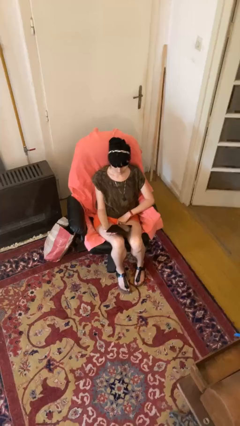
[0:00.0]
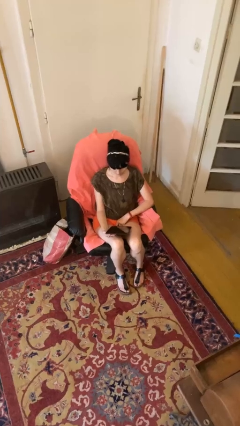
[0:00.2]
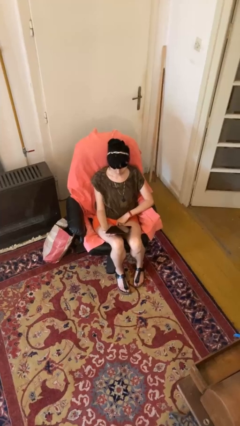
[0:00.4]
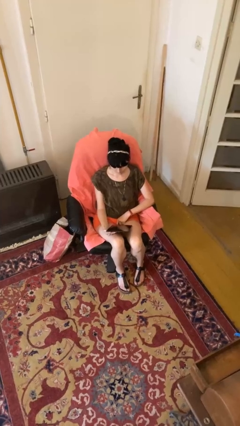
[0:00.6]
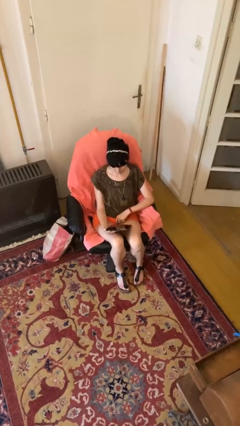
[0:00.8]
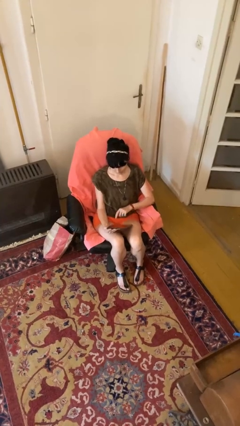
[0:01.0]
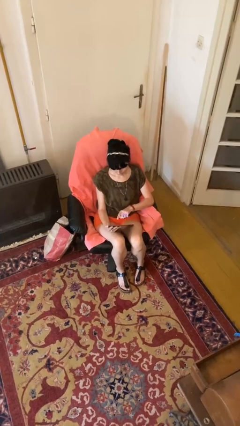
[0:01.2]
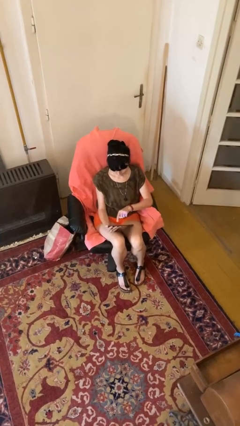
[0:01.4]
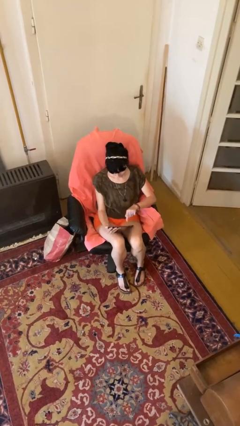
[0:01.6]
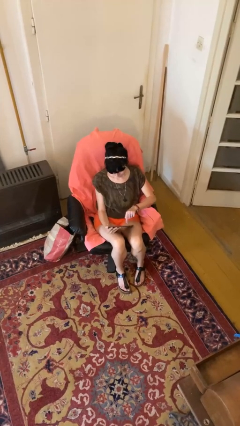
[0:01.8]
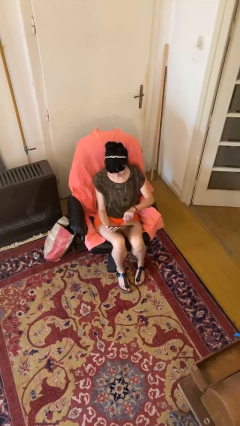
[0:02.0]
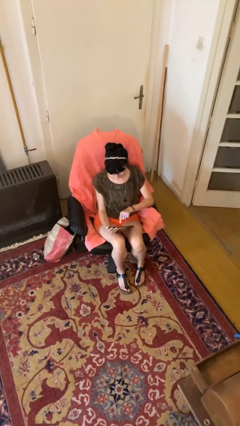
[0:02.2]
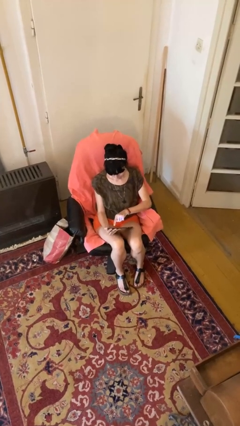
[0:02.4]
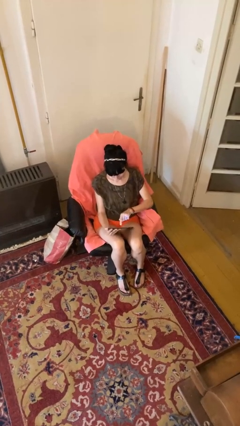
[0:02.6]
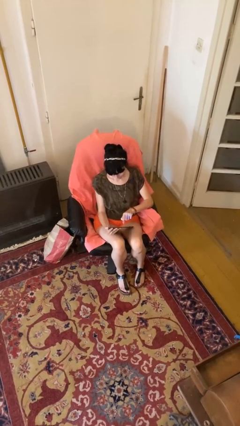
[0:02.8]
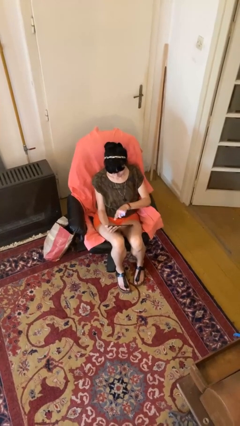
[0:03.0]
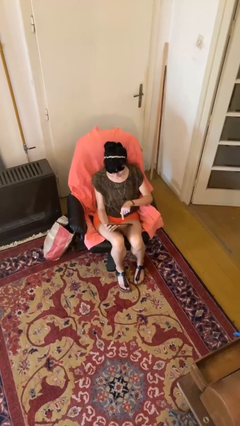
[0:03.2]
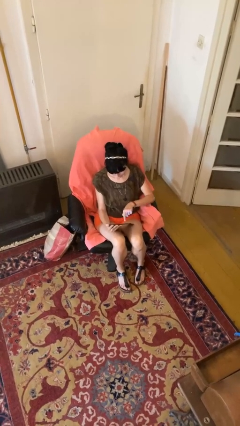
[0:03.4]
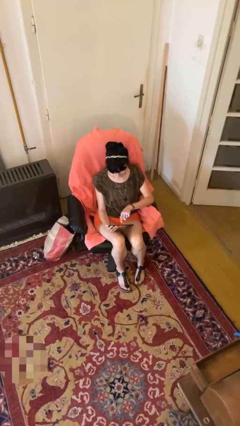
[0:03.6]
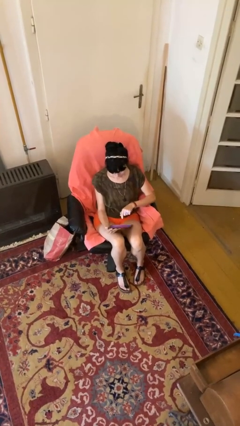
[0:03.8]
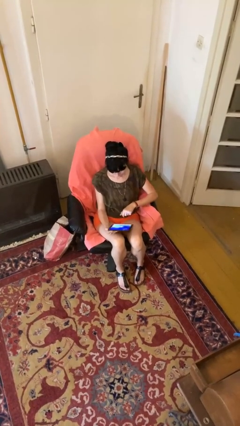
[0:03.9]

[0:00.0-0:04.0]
person interacts with tablet

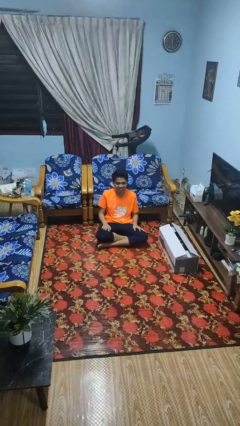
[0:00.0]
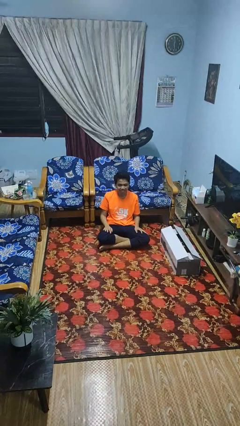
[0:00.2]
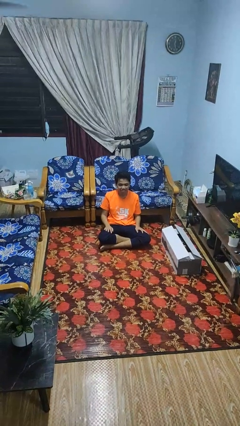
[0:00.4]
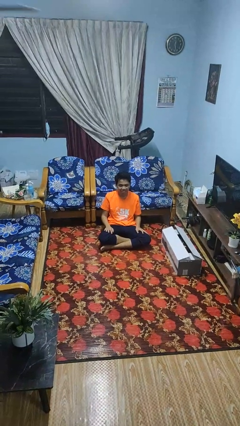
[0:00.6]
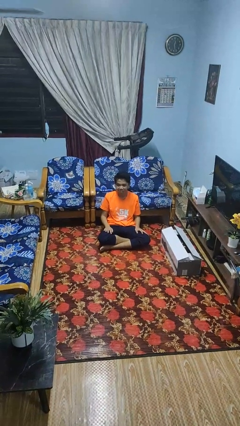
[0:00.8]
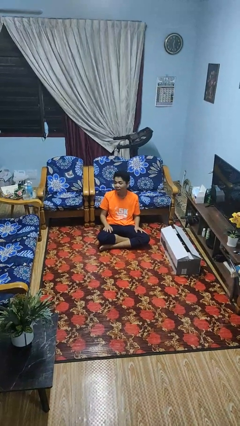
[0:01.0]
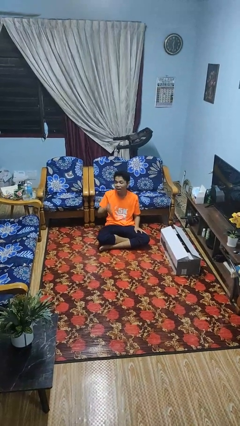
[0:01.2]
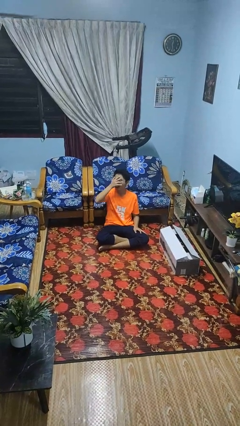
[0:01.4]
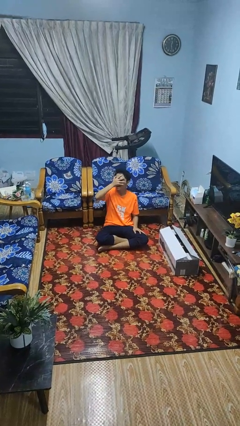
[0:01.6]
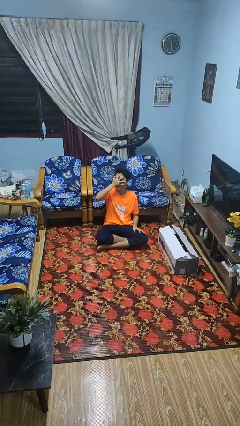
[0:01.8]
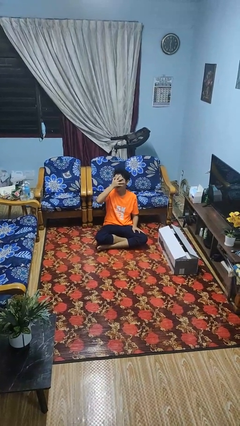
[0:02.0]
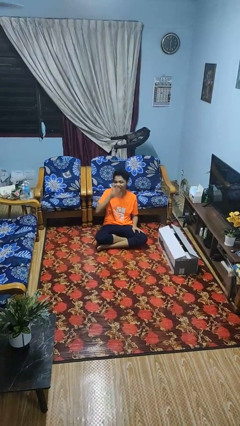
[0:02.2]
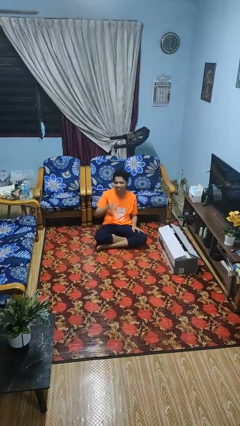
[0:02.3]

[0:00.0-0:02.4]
person covers face with hands

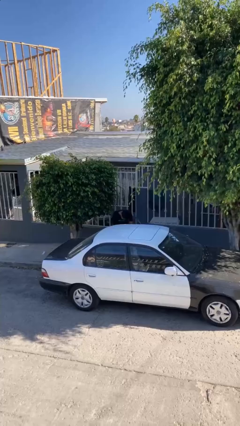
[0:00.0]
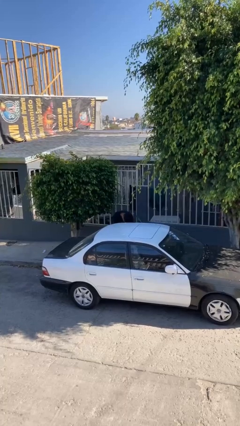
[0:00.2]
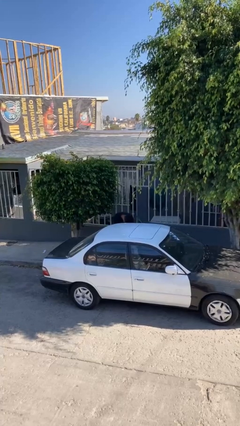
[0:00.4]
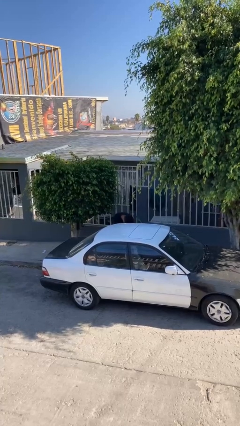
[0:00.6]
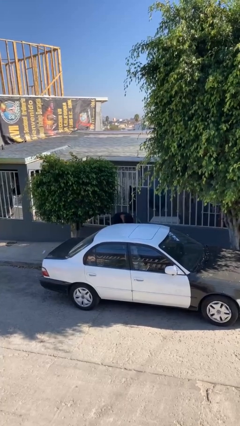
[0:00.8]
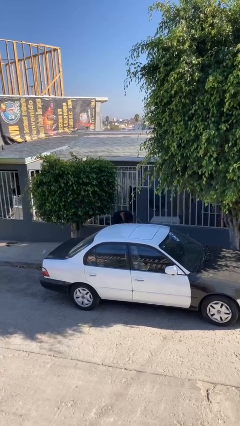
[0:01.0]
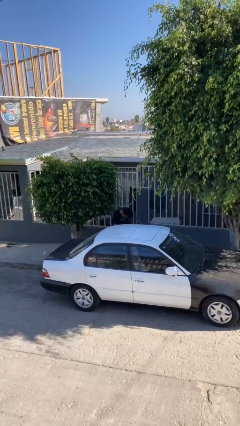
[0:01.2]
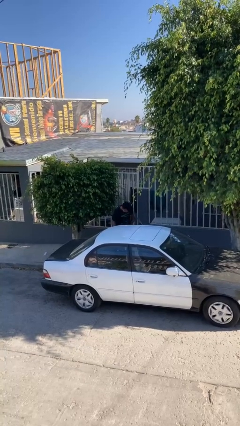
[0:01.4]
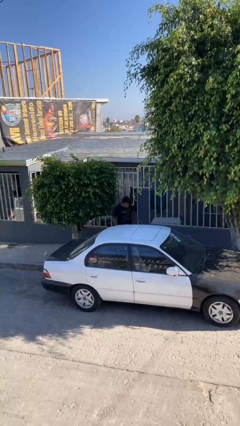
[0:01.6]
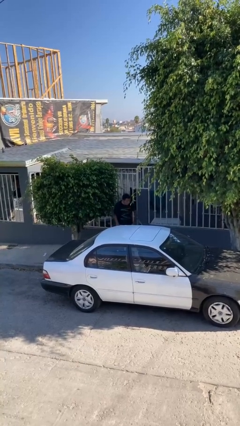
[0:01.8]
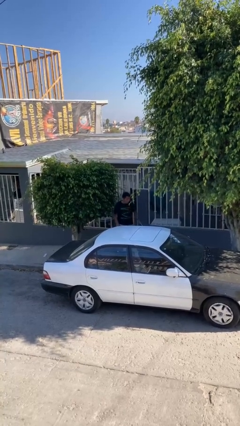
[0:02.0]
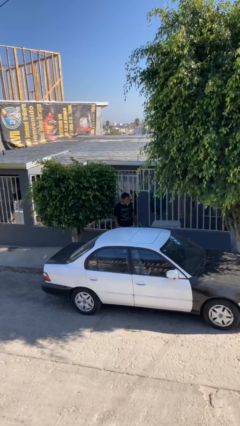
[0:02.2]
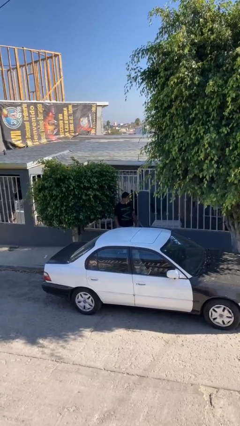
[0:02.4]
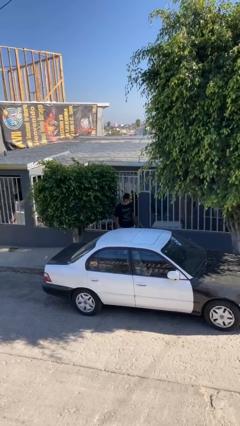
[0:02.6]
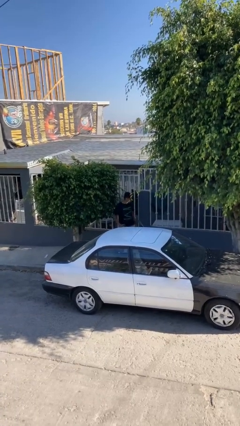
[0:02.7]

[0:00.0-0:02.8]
person loads car

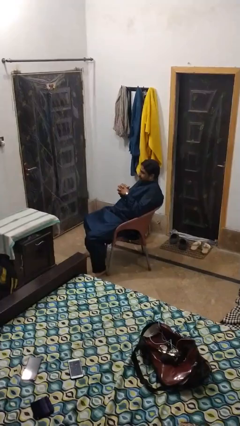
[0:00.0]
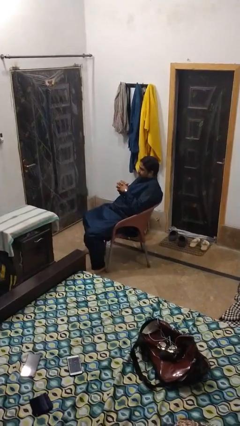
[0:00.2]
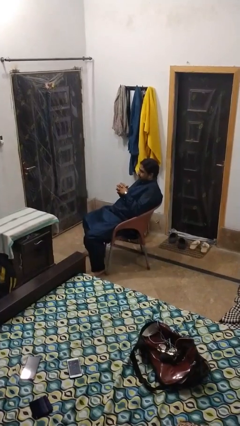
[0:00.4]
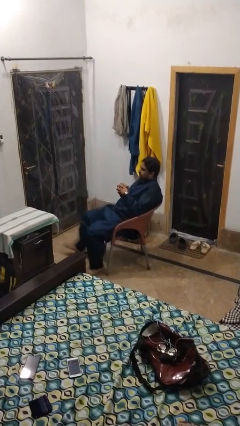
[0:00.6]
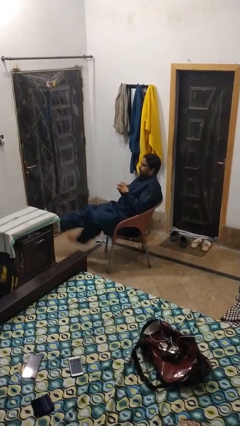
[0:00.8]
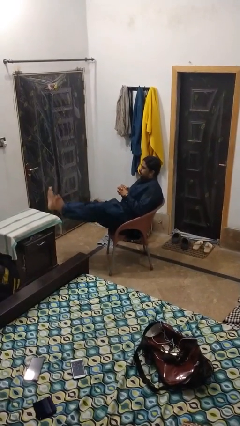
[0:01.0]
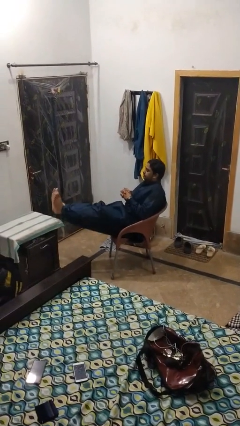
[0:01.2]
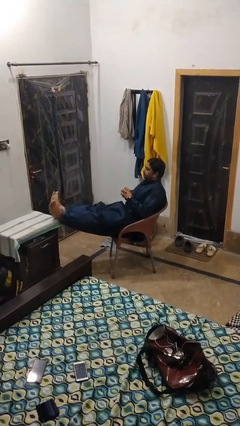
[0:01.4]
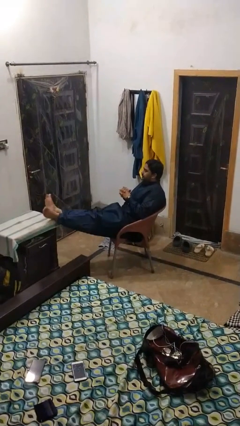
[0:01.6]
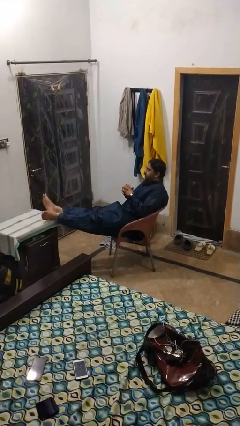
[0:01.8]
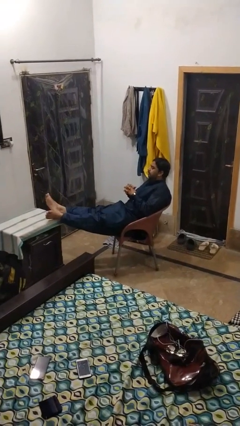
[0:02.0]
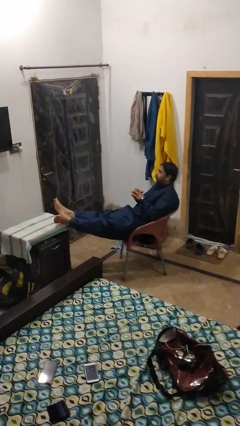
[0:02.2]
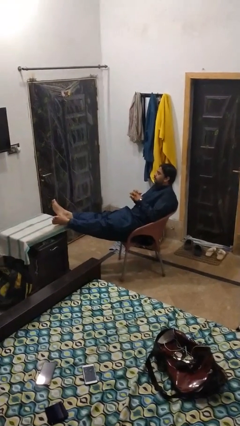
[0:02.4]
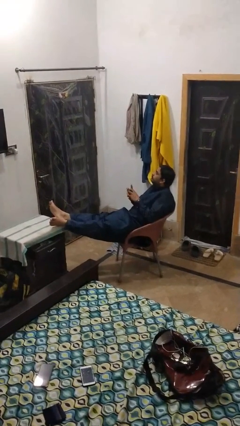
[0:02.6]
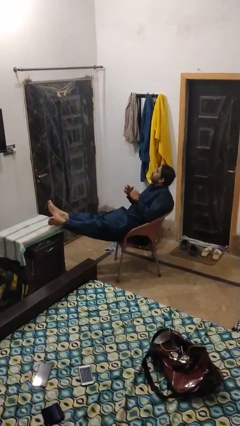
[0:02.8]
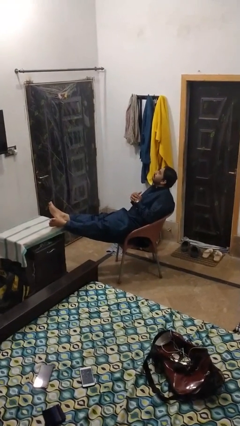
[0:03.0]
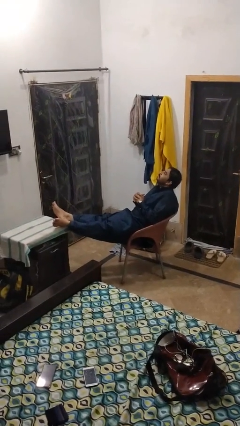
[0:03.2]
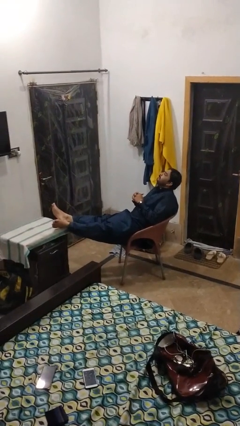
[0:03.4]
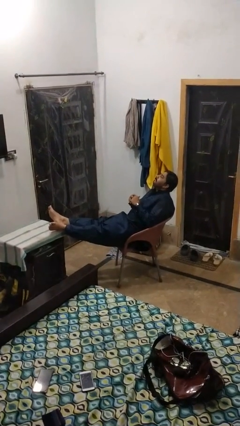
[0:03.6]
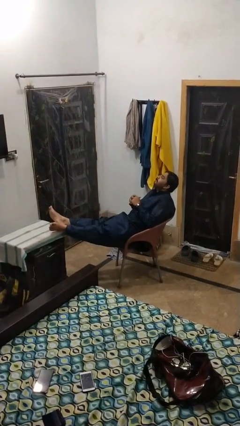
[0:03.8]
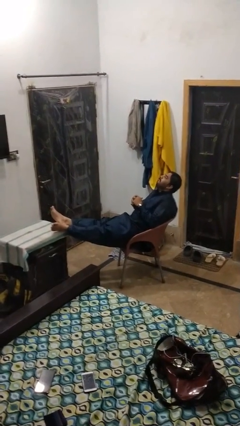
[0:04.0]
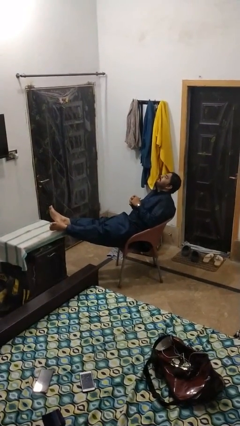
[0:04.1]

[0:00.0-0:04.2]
person puts feet up

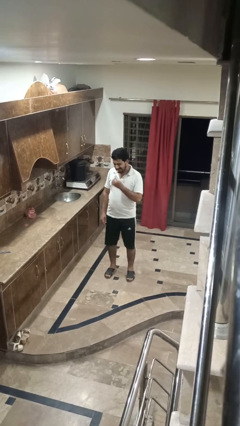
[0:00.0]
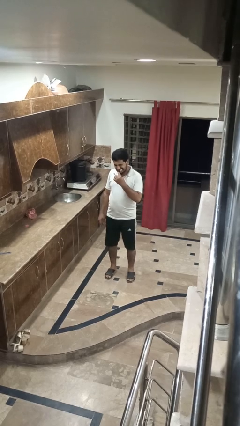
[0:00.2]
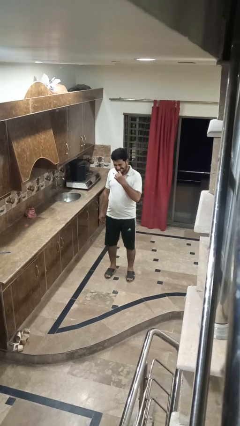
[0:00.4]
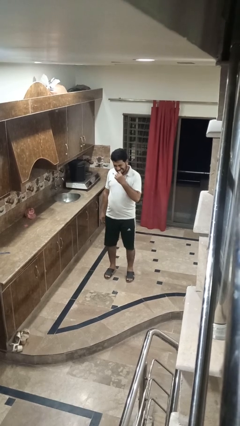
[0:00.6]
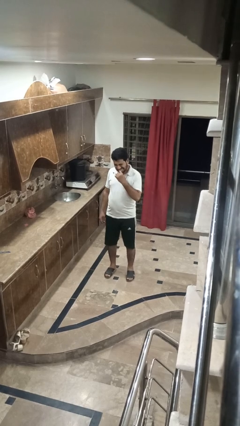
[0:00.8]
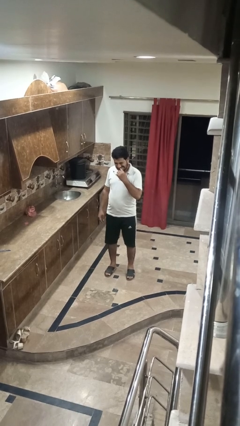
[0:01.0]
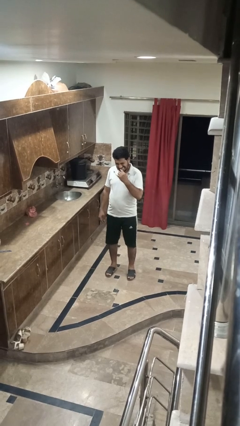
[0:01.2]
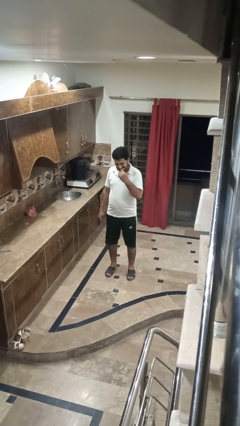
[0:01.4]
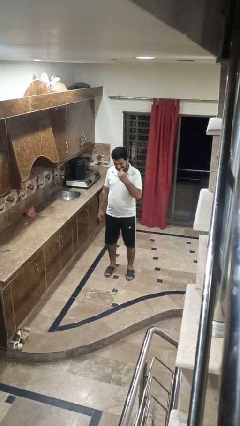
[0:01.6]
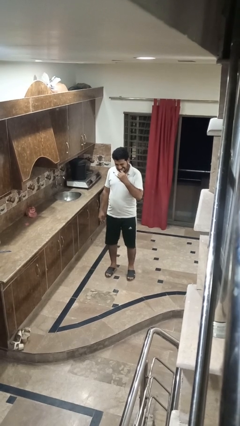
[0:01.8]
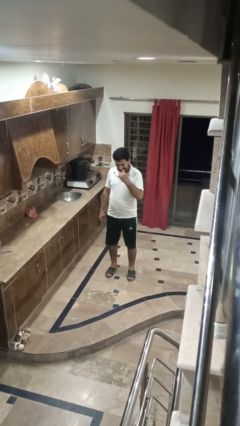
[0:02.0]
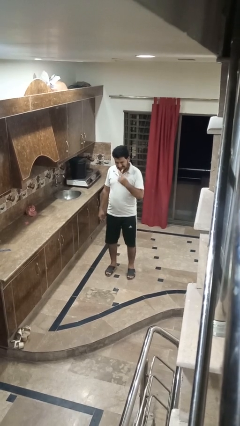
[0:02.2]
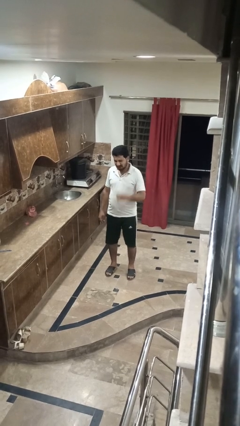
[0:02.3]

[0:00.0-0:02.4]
person brushes teeth

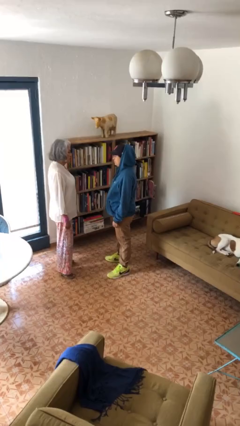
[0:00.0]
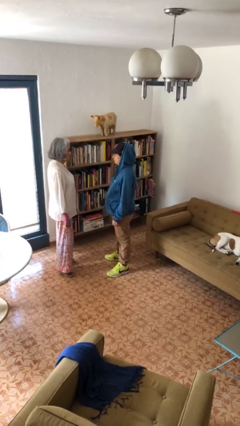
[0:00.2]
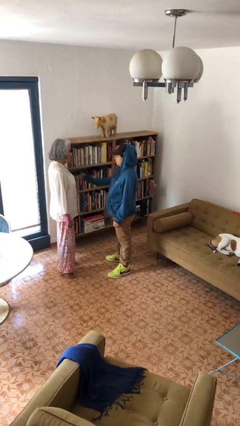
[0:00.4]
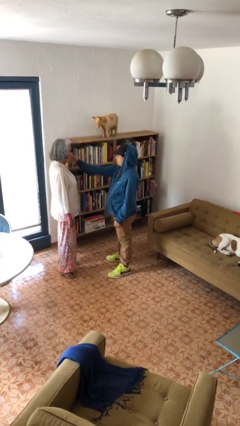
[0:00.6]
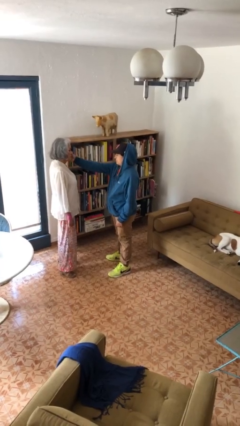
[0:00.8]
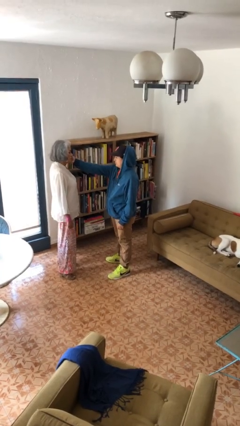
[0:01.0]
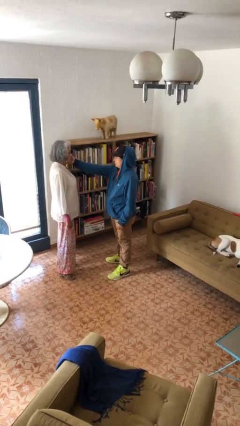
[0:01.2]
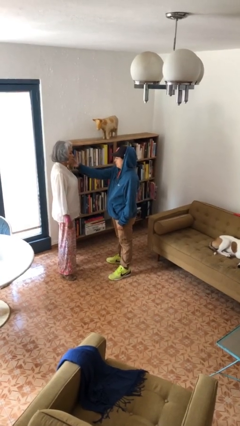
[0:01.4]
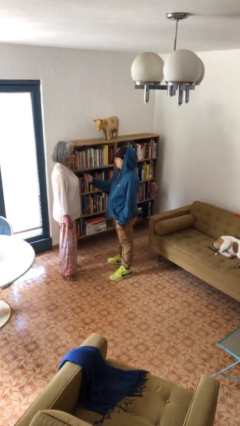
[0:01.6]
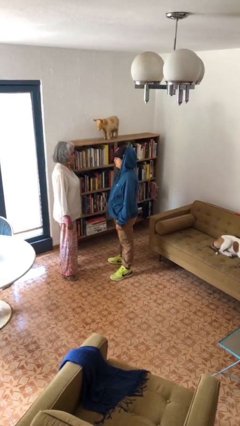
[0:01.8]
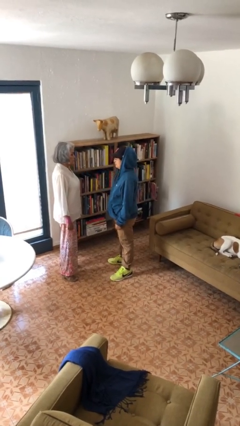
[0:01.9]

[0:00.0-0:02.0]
person touches face of person
